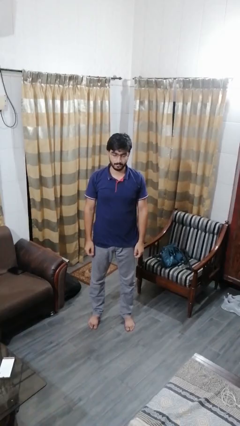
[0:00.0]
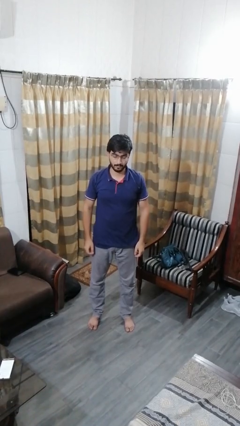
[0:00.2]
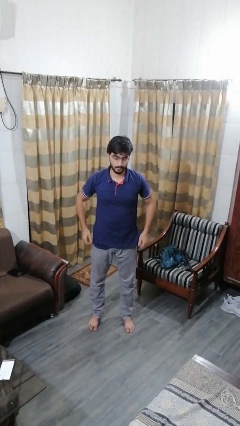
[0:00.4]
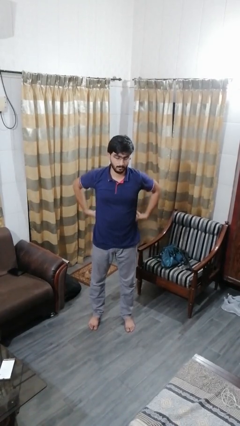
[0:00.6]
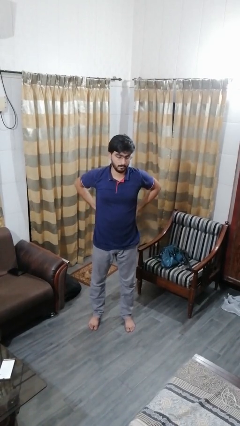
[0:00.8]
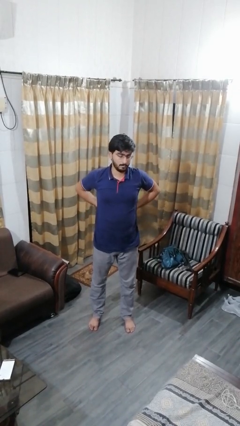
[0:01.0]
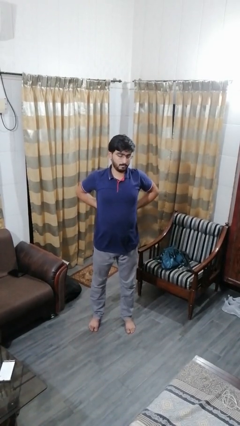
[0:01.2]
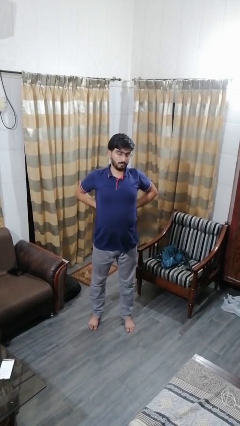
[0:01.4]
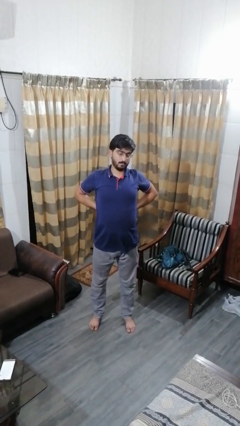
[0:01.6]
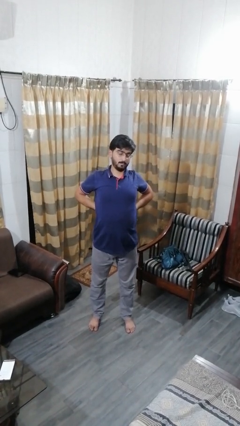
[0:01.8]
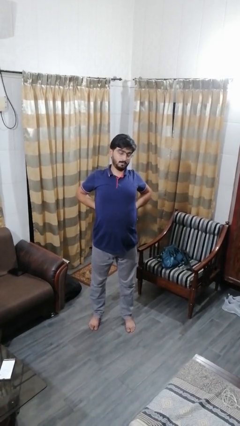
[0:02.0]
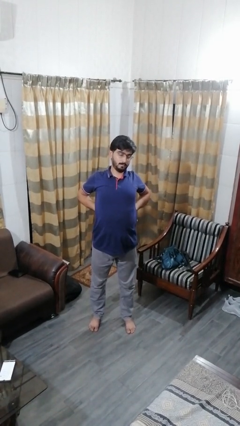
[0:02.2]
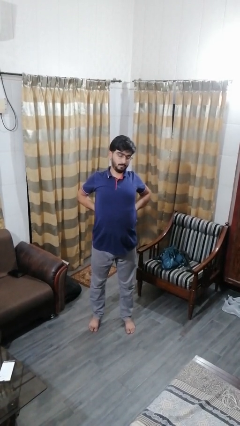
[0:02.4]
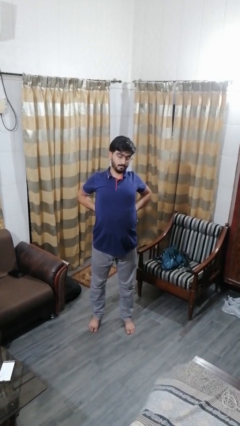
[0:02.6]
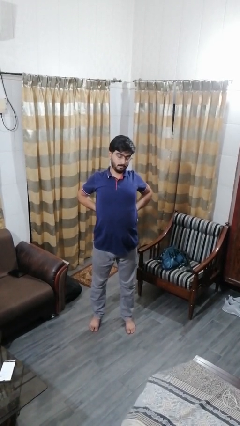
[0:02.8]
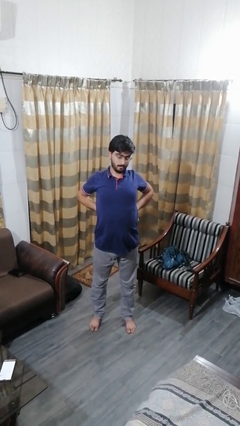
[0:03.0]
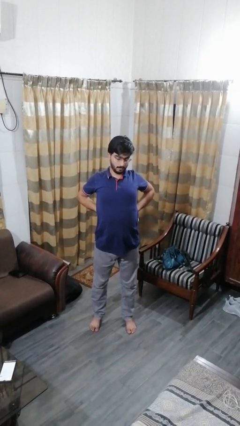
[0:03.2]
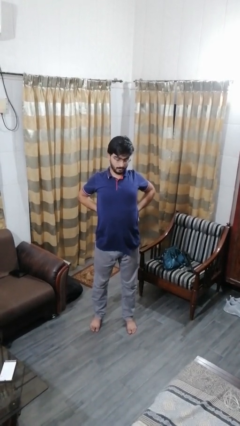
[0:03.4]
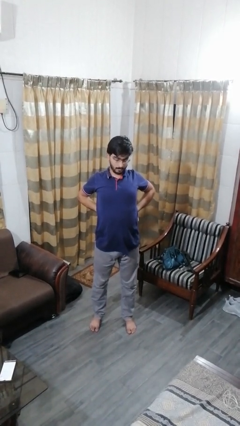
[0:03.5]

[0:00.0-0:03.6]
person stretches back

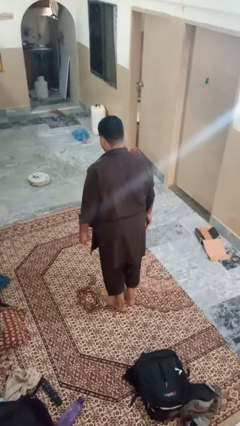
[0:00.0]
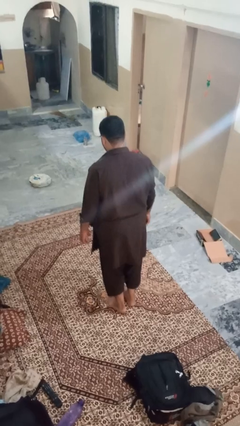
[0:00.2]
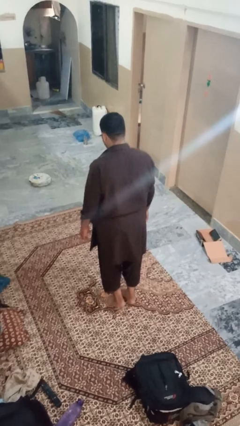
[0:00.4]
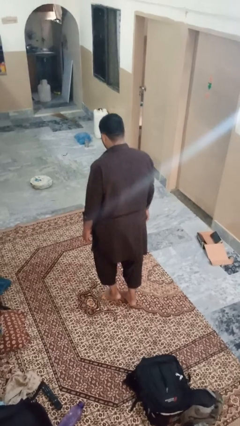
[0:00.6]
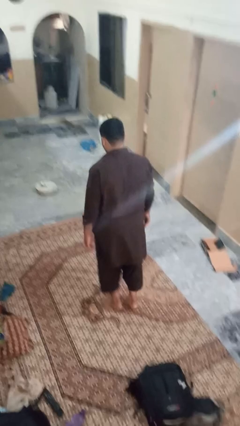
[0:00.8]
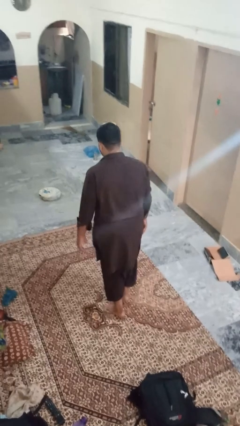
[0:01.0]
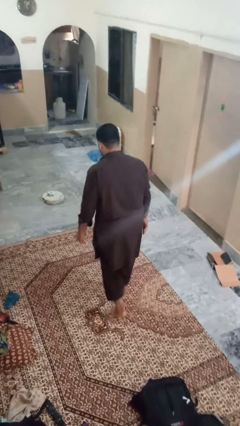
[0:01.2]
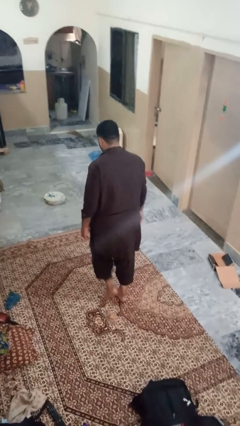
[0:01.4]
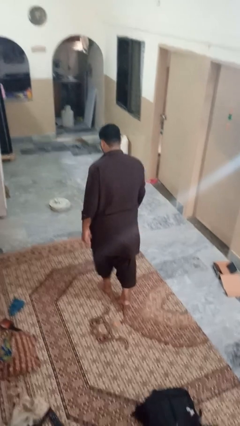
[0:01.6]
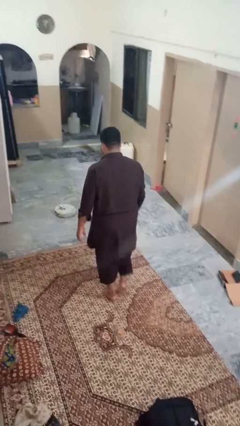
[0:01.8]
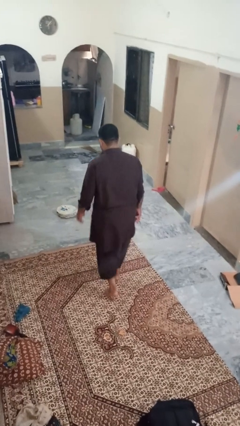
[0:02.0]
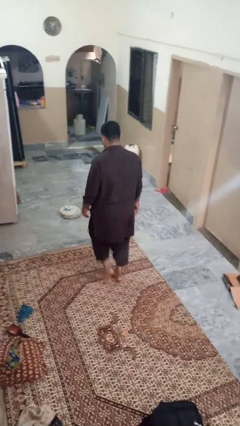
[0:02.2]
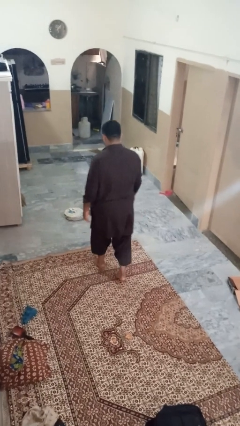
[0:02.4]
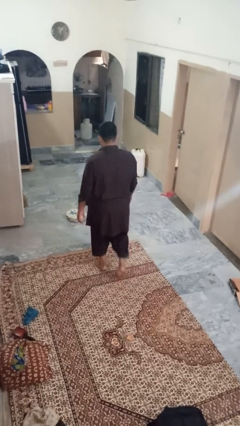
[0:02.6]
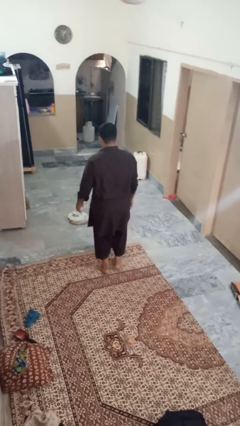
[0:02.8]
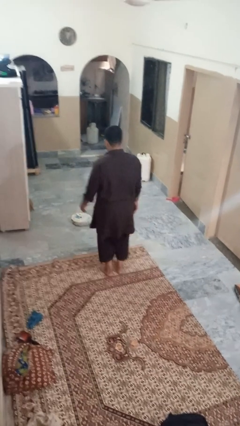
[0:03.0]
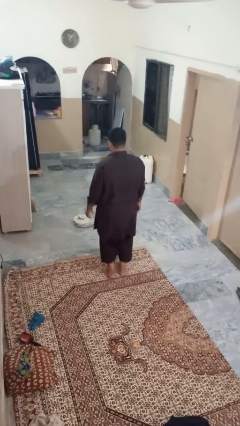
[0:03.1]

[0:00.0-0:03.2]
person walks tiptoe

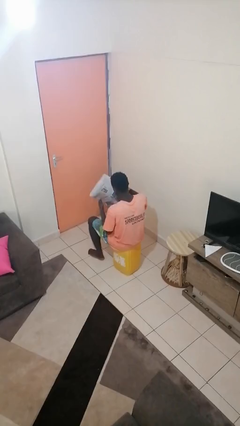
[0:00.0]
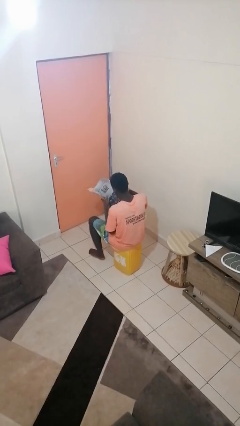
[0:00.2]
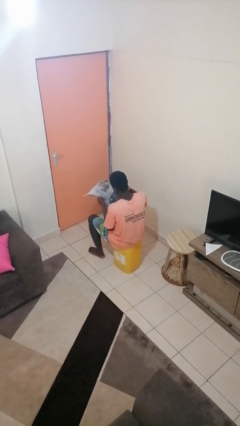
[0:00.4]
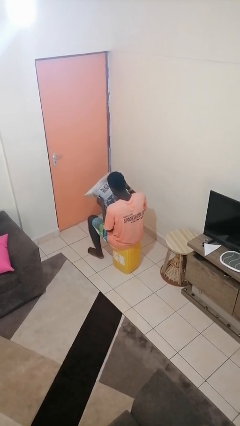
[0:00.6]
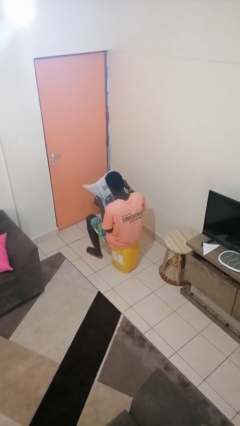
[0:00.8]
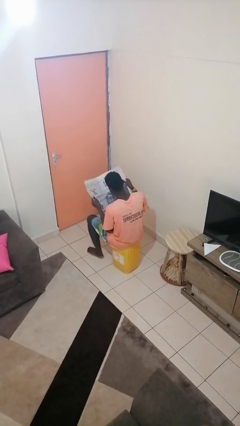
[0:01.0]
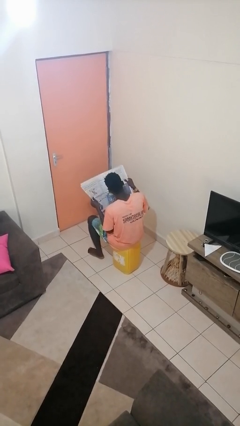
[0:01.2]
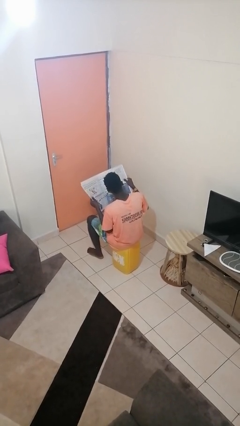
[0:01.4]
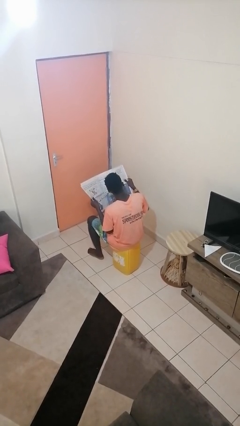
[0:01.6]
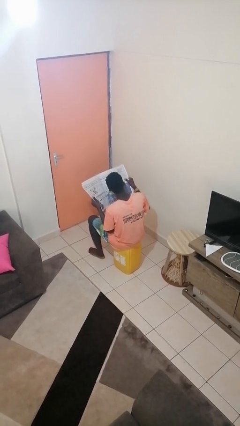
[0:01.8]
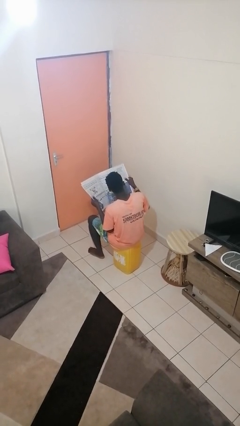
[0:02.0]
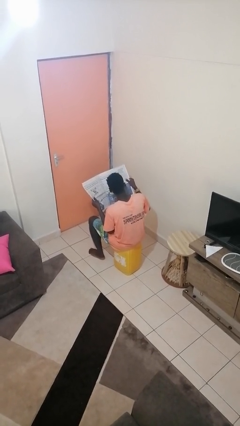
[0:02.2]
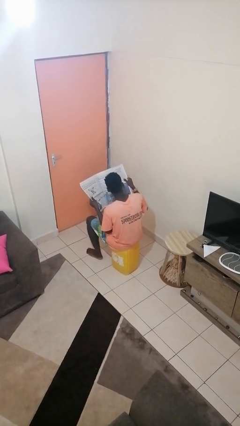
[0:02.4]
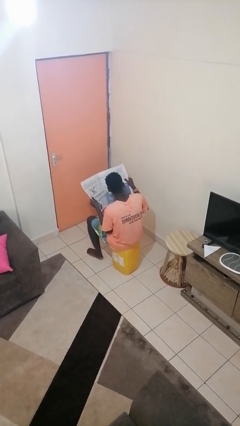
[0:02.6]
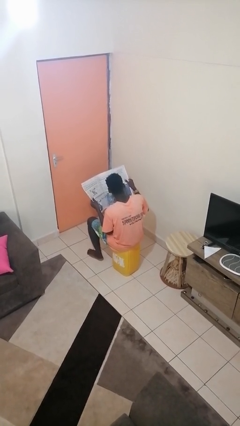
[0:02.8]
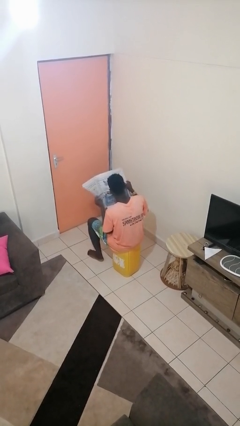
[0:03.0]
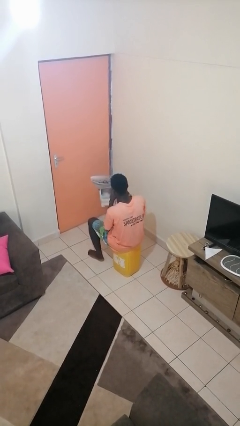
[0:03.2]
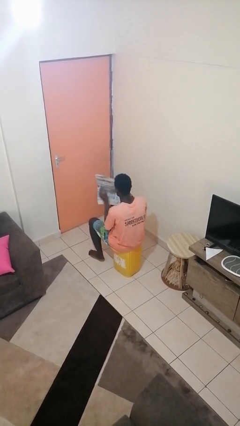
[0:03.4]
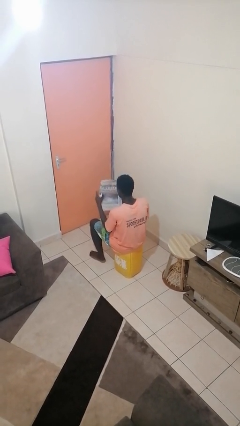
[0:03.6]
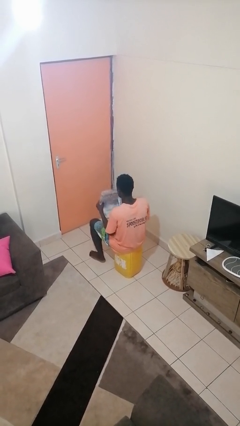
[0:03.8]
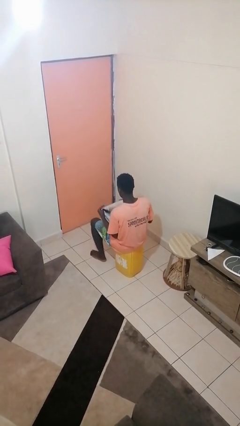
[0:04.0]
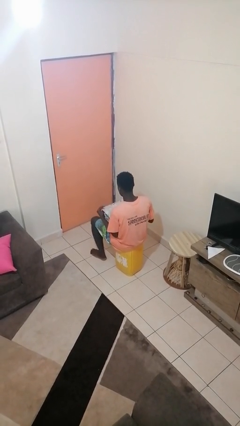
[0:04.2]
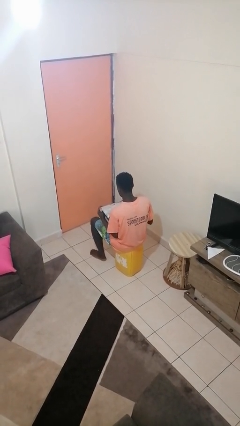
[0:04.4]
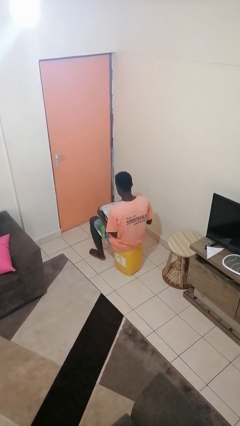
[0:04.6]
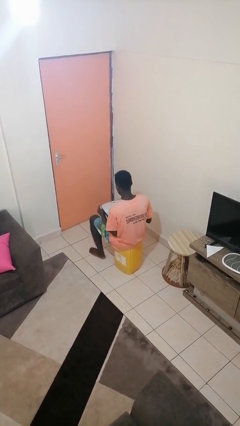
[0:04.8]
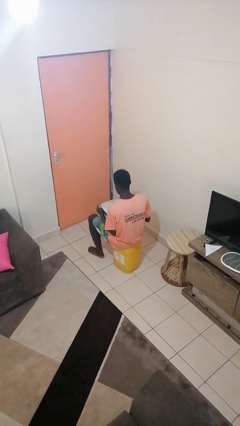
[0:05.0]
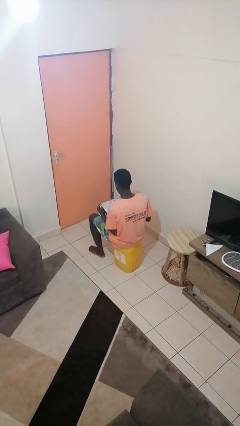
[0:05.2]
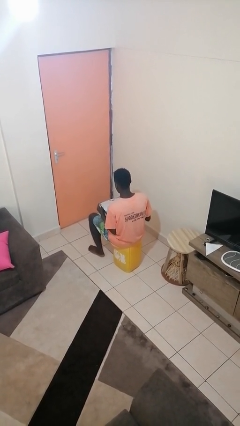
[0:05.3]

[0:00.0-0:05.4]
person reads newspaper

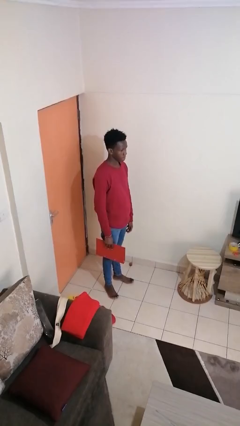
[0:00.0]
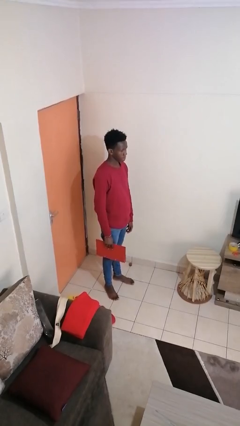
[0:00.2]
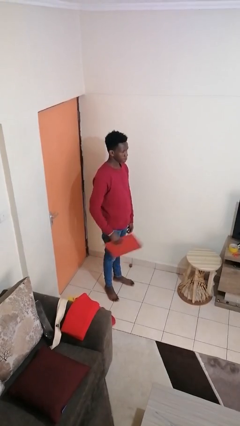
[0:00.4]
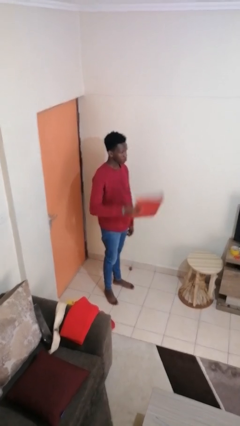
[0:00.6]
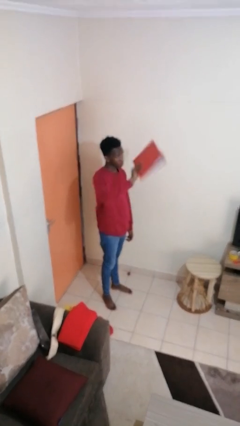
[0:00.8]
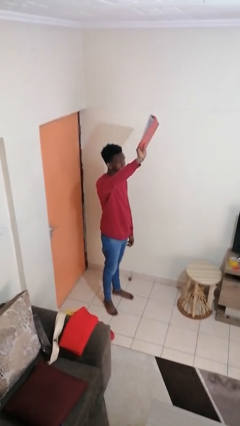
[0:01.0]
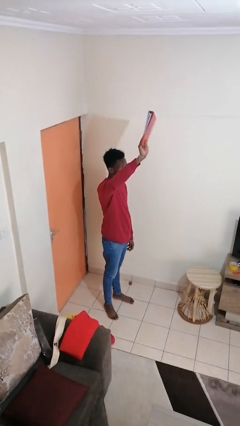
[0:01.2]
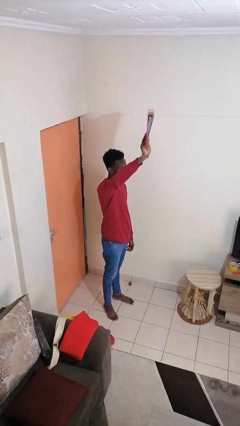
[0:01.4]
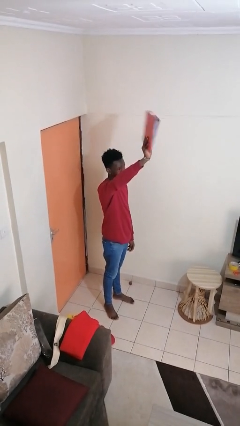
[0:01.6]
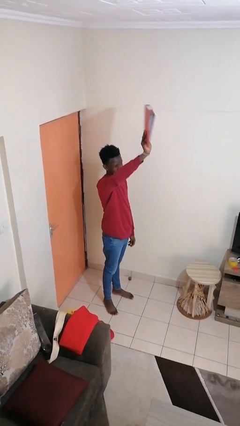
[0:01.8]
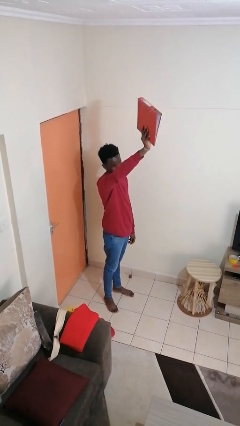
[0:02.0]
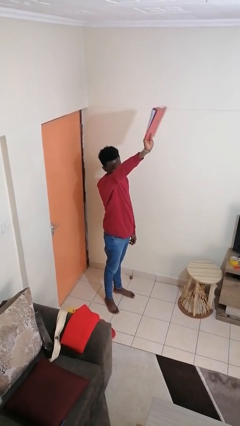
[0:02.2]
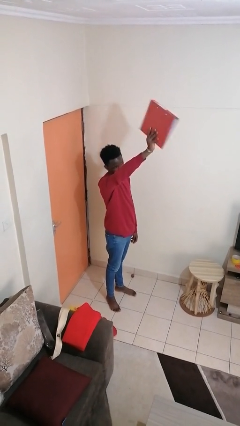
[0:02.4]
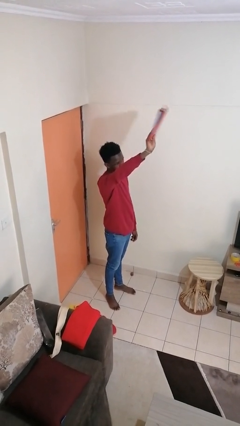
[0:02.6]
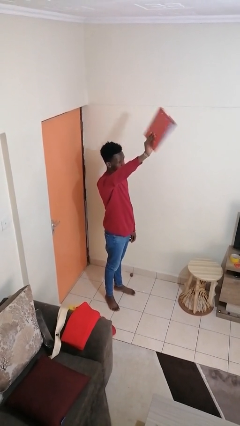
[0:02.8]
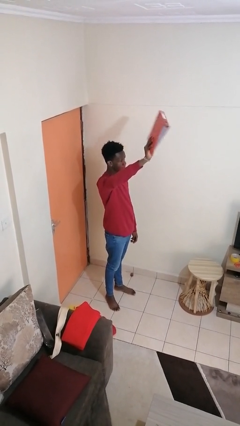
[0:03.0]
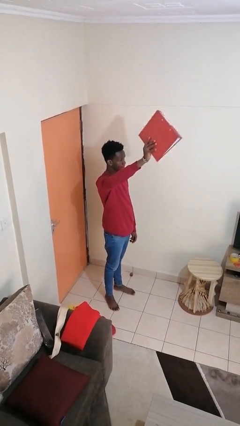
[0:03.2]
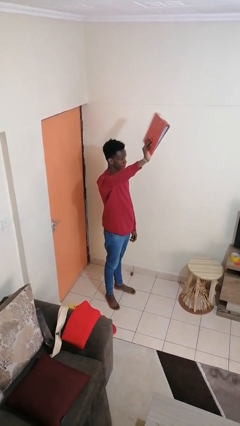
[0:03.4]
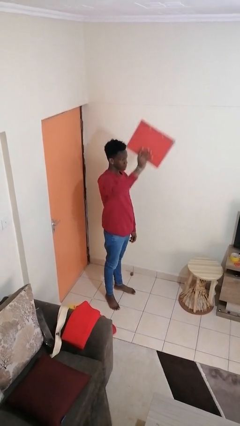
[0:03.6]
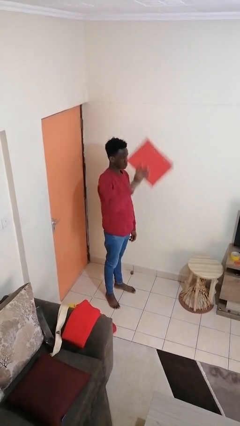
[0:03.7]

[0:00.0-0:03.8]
person holds object above head

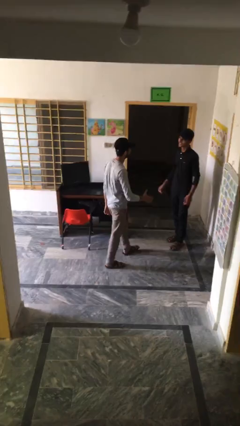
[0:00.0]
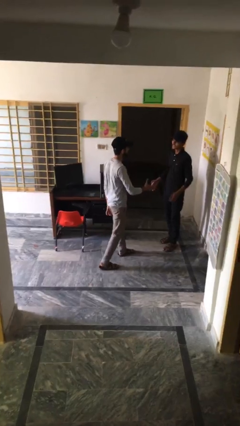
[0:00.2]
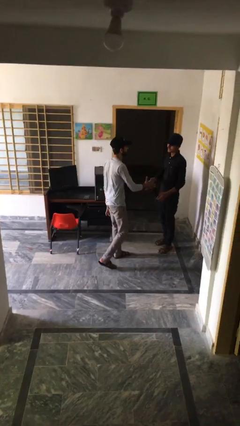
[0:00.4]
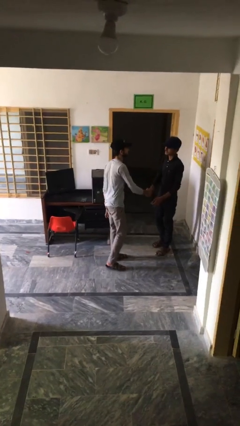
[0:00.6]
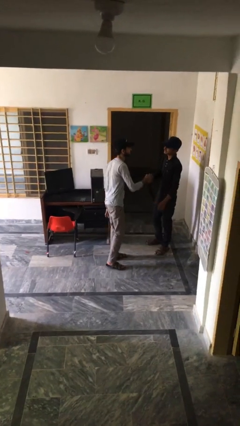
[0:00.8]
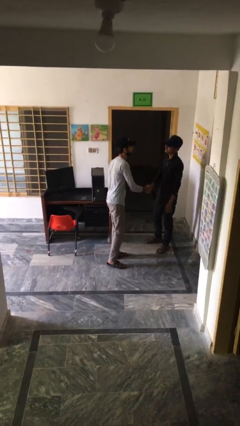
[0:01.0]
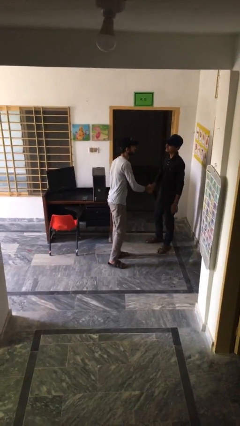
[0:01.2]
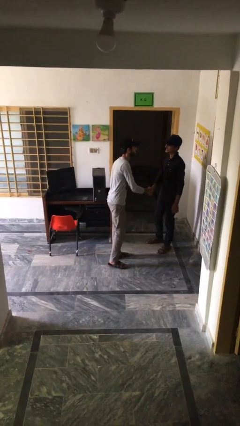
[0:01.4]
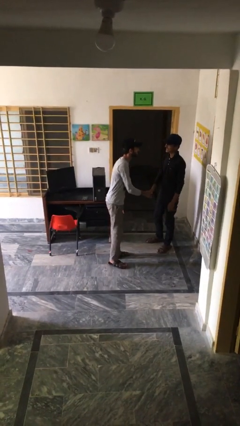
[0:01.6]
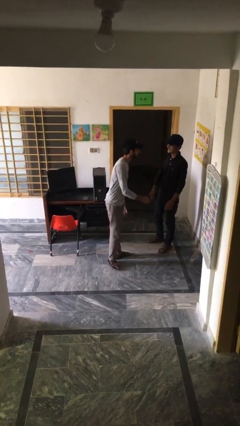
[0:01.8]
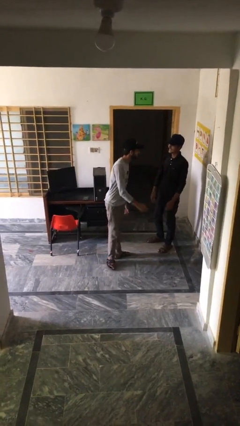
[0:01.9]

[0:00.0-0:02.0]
person shakes hand
